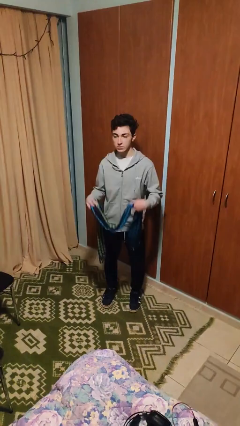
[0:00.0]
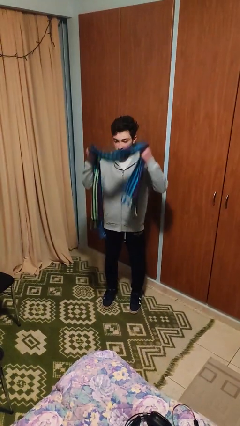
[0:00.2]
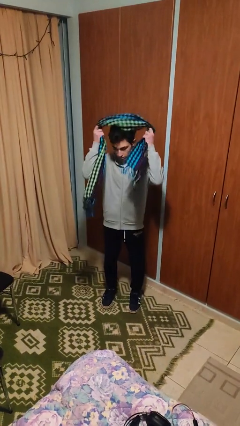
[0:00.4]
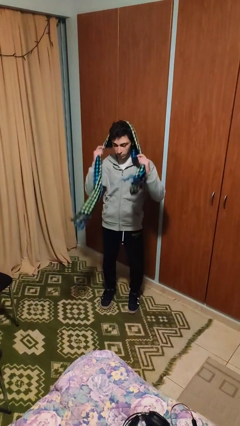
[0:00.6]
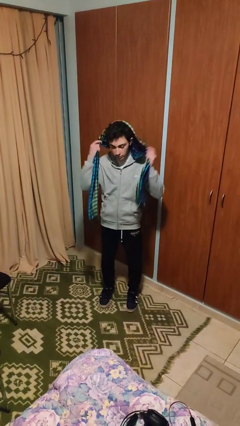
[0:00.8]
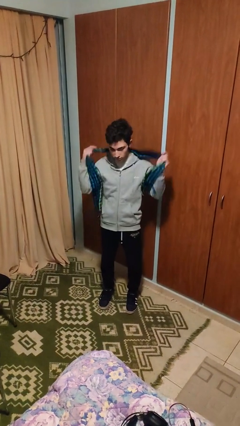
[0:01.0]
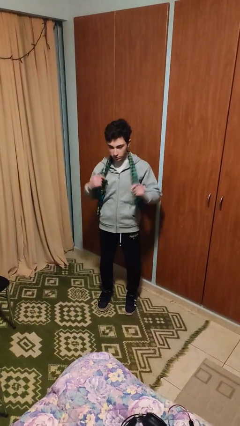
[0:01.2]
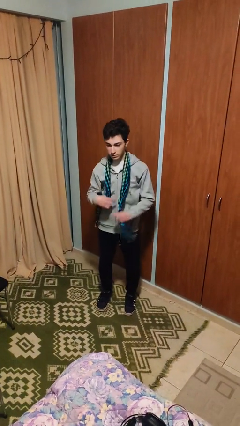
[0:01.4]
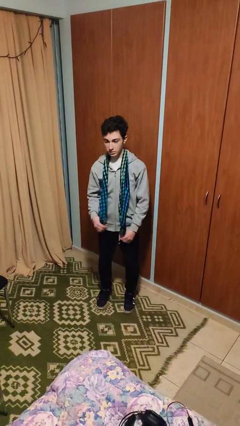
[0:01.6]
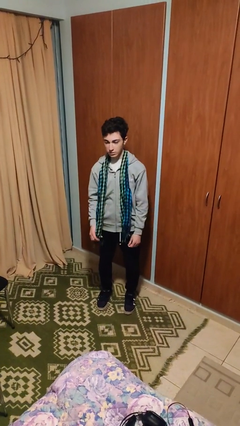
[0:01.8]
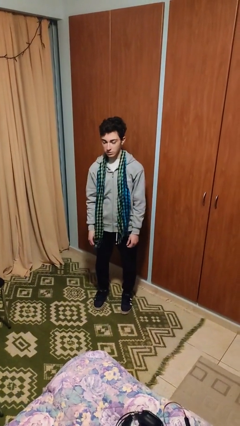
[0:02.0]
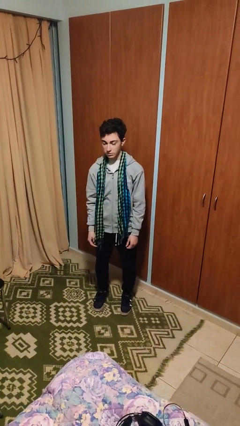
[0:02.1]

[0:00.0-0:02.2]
person puts on scarf

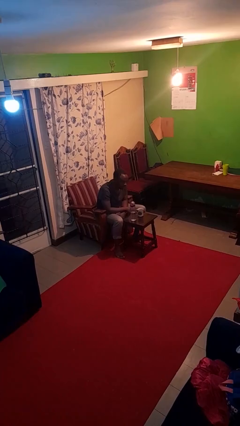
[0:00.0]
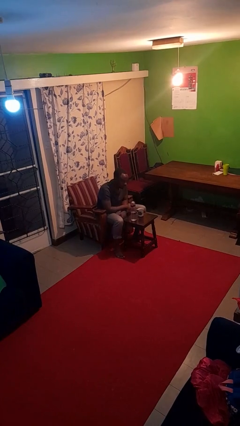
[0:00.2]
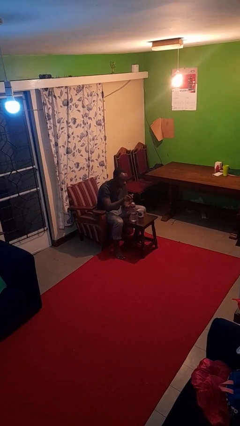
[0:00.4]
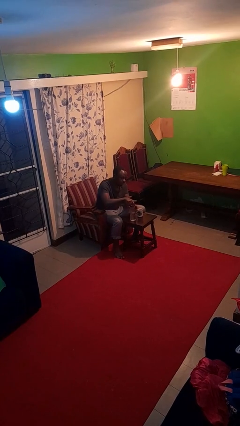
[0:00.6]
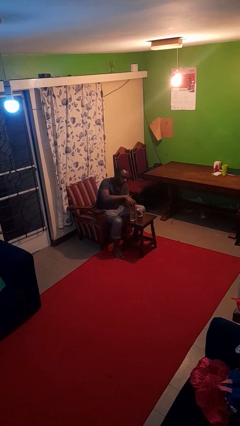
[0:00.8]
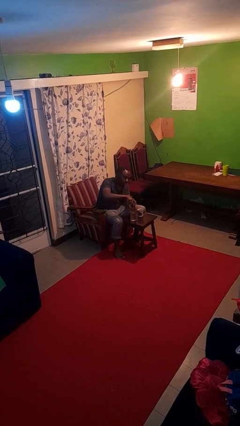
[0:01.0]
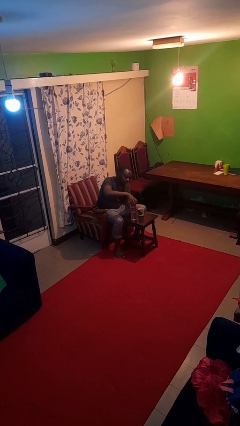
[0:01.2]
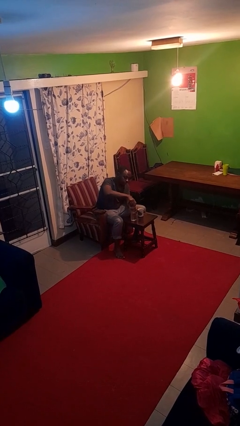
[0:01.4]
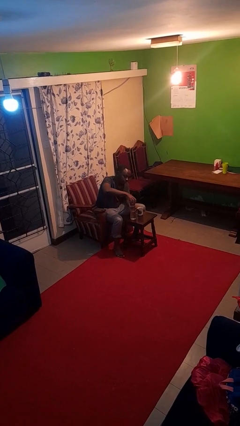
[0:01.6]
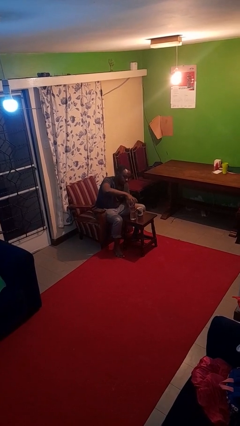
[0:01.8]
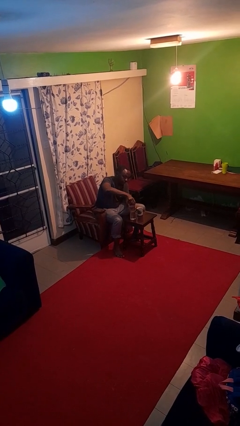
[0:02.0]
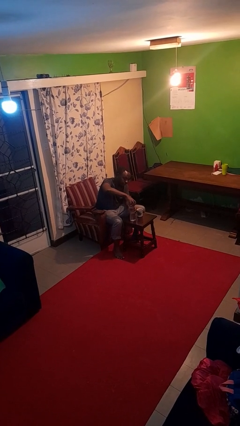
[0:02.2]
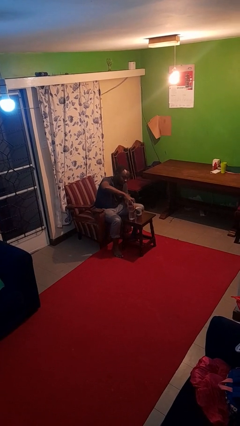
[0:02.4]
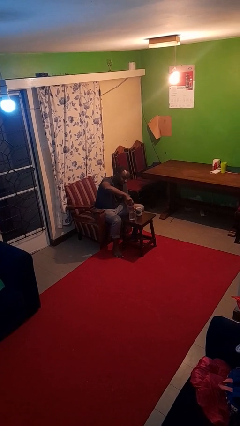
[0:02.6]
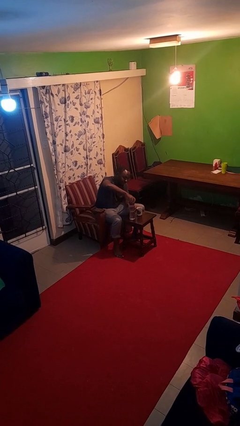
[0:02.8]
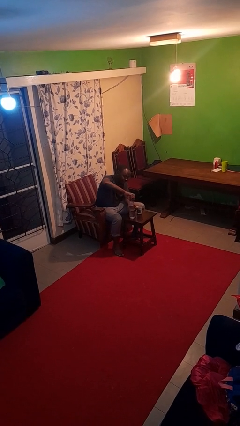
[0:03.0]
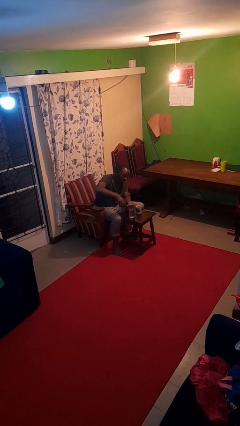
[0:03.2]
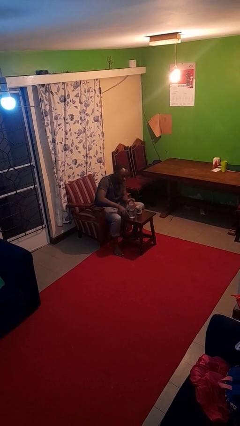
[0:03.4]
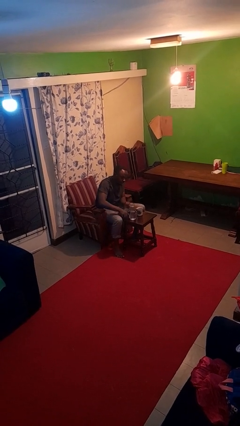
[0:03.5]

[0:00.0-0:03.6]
person unscrews lid from bottle

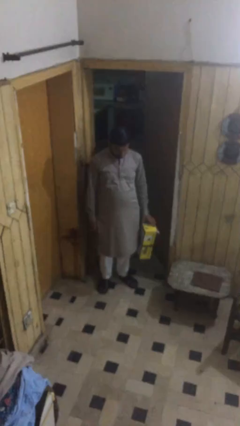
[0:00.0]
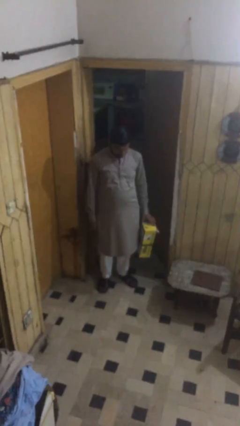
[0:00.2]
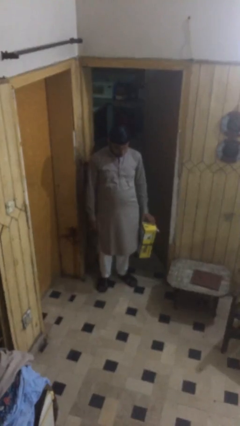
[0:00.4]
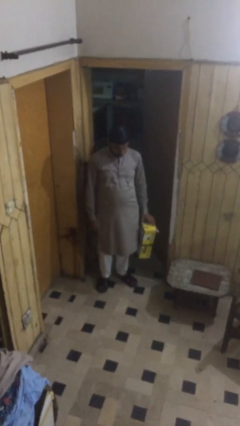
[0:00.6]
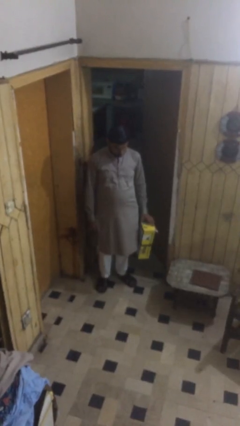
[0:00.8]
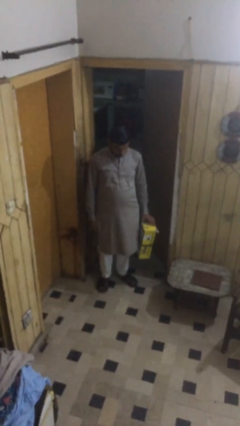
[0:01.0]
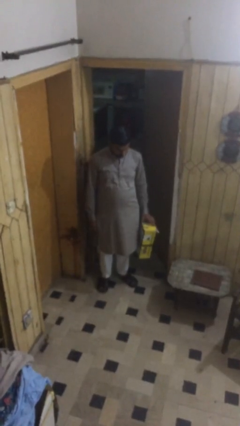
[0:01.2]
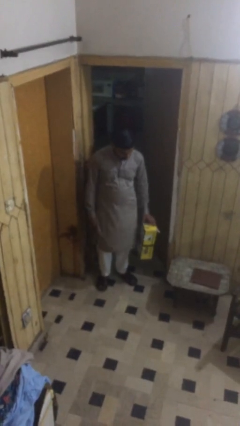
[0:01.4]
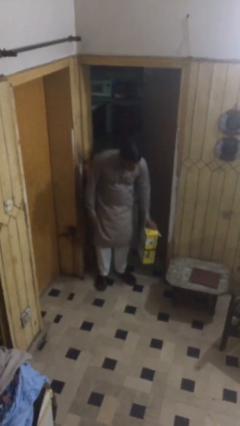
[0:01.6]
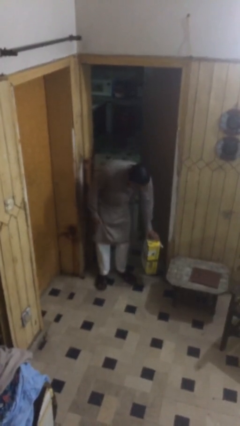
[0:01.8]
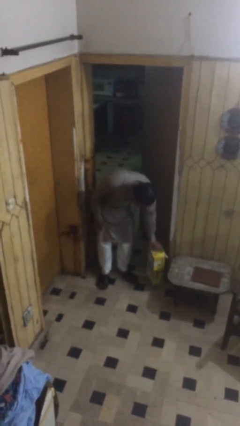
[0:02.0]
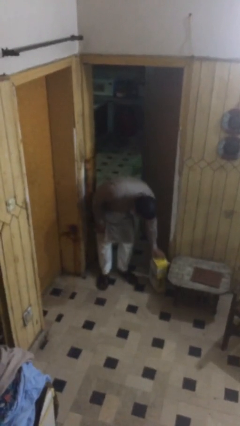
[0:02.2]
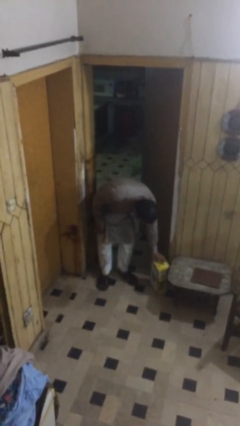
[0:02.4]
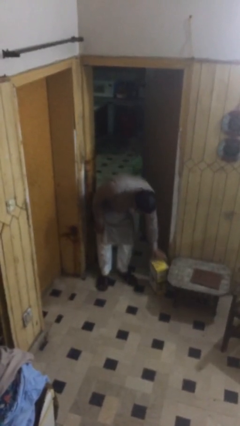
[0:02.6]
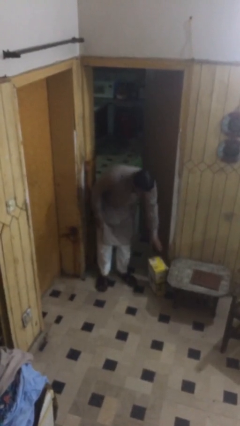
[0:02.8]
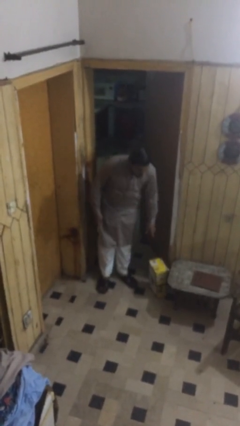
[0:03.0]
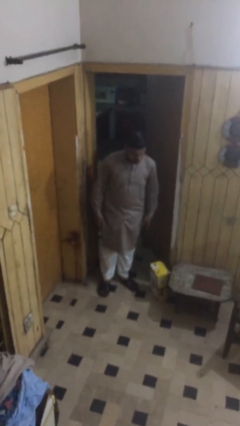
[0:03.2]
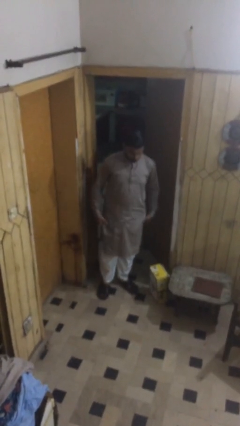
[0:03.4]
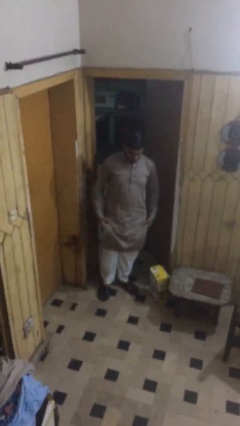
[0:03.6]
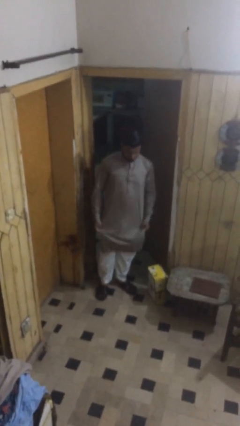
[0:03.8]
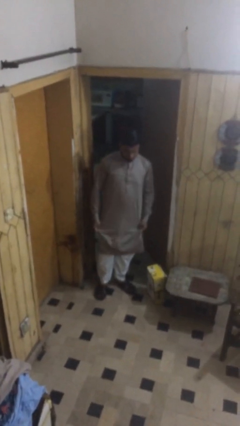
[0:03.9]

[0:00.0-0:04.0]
person puts down object on floor

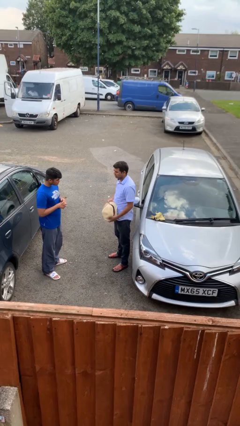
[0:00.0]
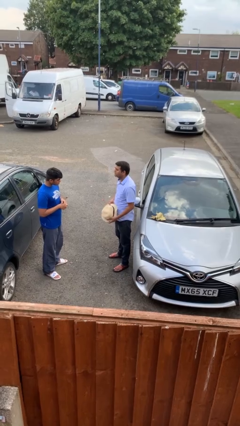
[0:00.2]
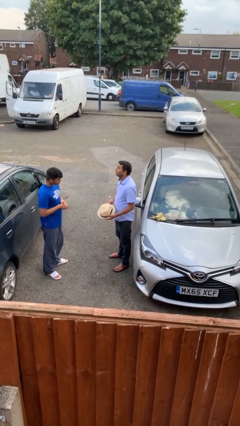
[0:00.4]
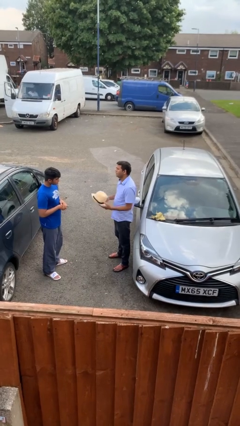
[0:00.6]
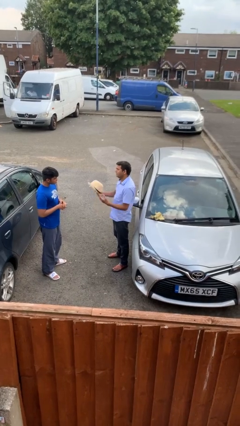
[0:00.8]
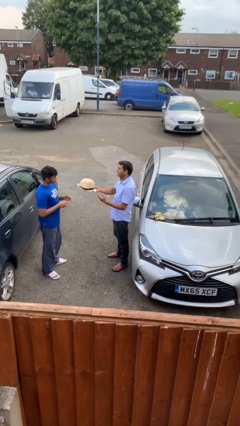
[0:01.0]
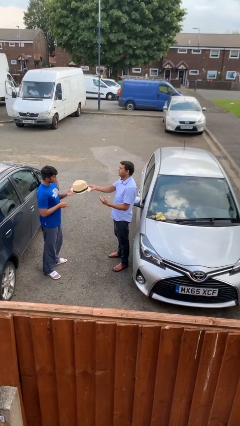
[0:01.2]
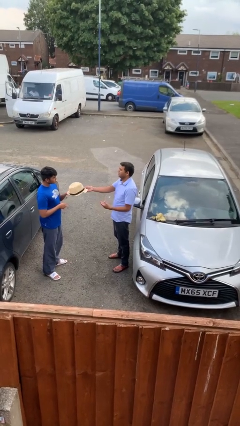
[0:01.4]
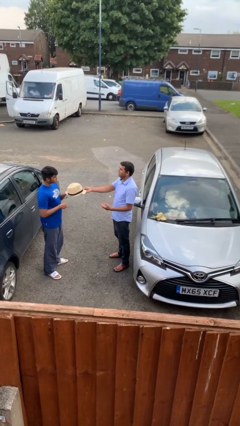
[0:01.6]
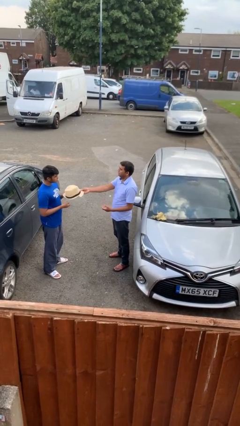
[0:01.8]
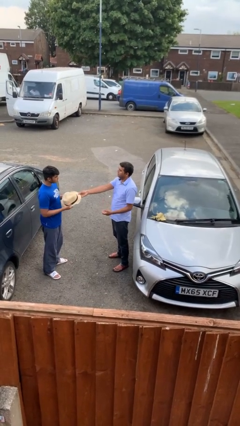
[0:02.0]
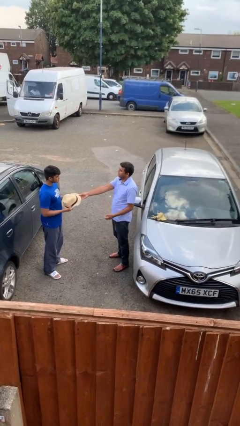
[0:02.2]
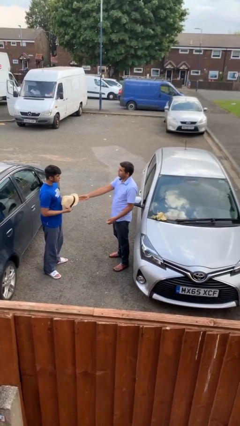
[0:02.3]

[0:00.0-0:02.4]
person transfers object to person

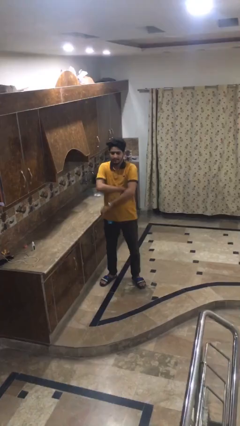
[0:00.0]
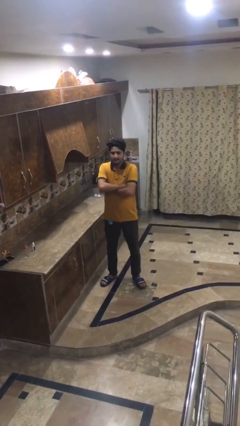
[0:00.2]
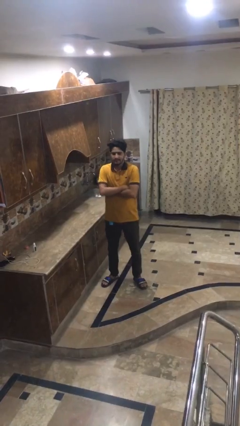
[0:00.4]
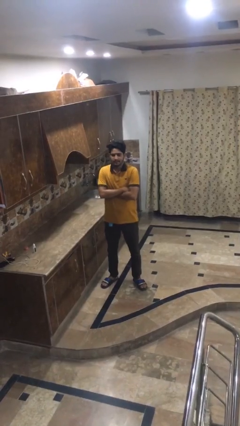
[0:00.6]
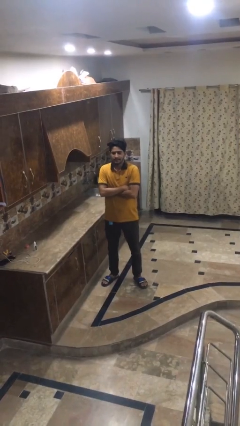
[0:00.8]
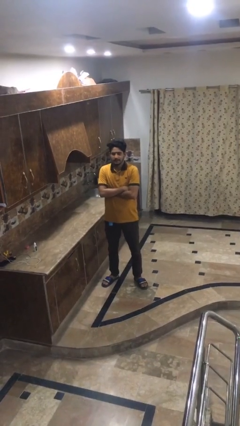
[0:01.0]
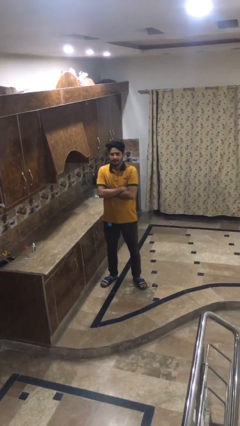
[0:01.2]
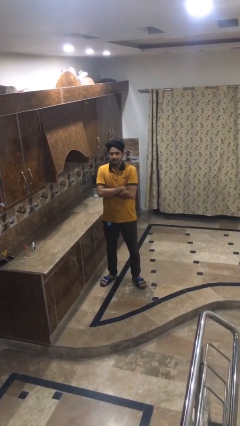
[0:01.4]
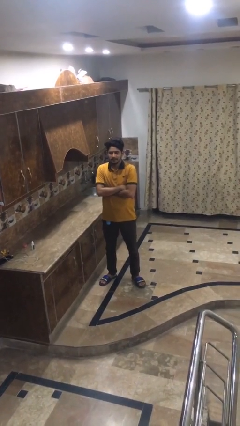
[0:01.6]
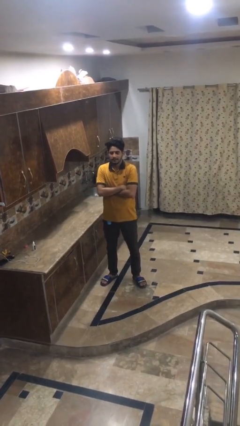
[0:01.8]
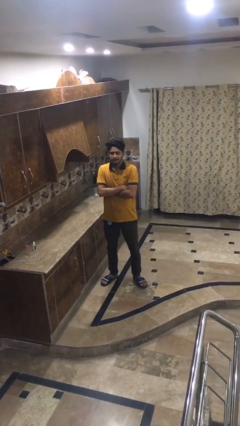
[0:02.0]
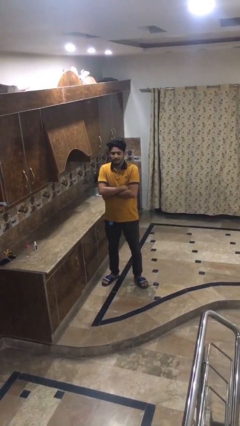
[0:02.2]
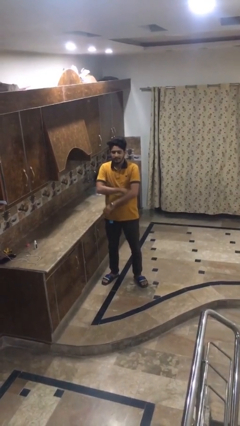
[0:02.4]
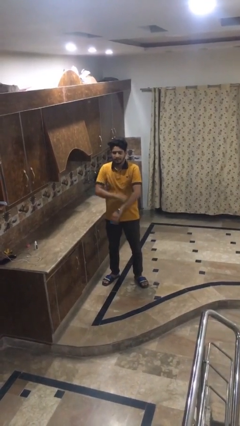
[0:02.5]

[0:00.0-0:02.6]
person crosses arms

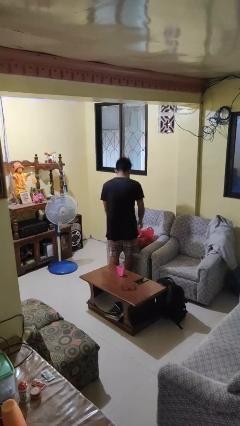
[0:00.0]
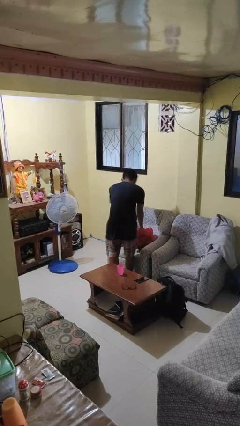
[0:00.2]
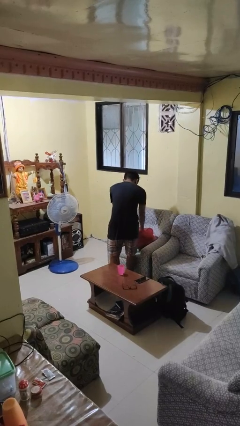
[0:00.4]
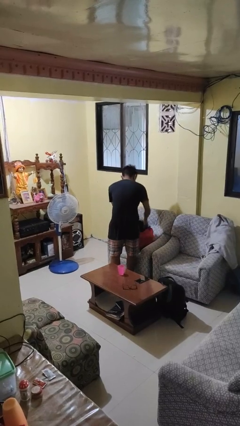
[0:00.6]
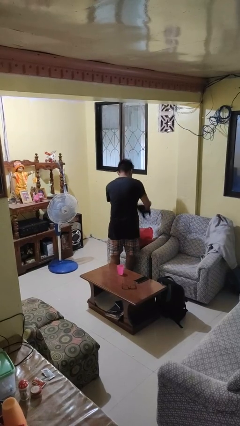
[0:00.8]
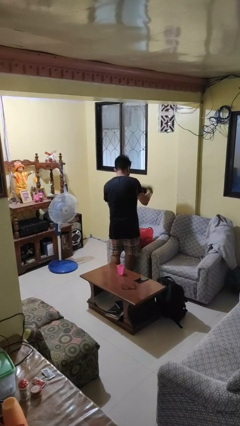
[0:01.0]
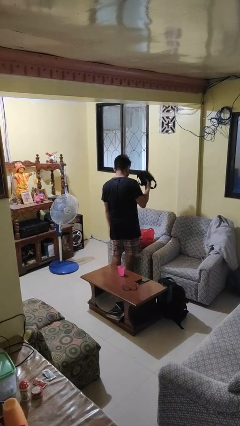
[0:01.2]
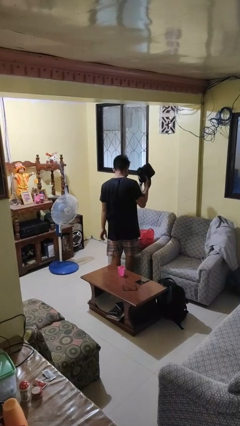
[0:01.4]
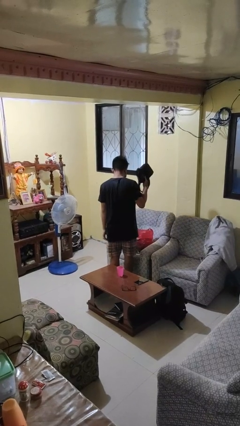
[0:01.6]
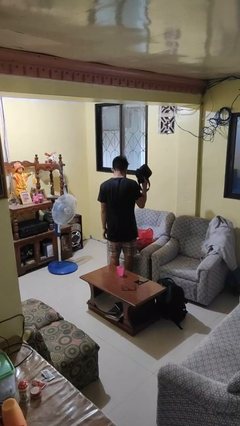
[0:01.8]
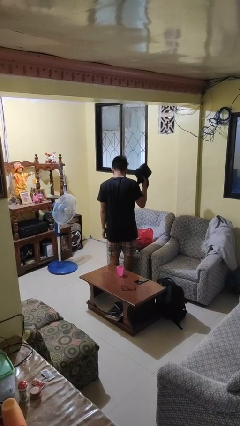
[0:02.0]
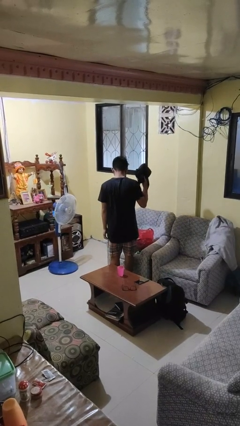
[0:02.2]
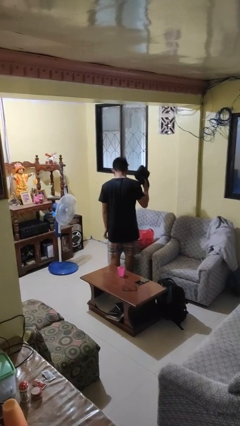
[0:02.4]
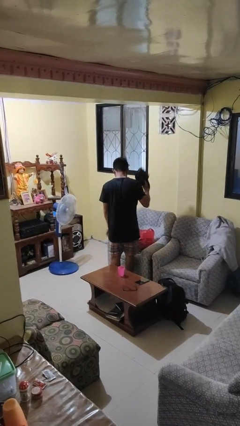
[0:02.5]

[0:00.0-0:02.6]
person takes object from bag

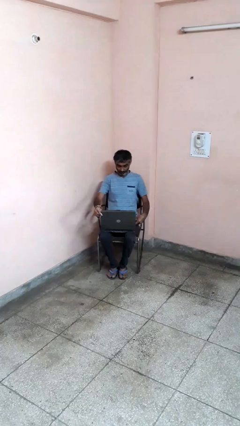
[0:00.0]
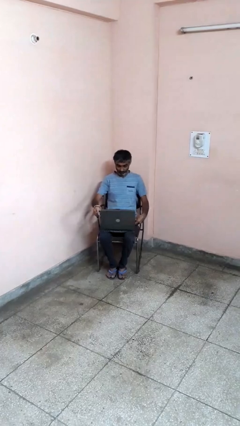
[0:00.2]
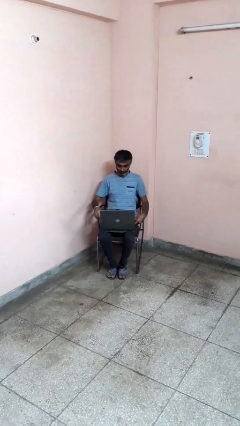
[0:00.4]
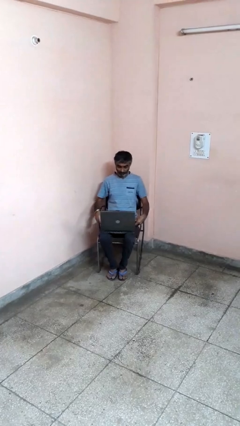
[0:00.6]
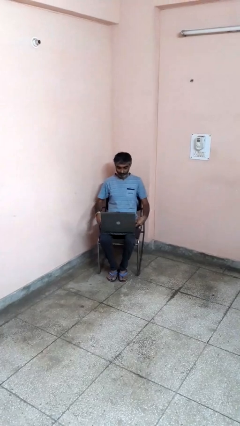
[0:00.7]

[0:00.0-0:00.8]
person opens laptop
